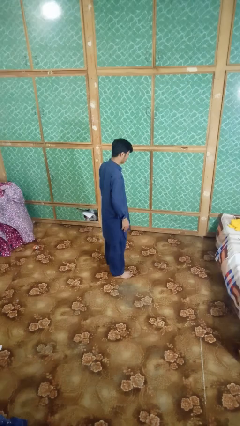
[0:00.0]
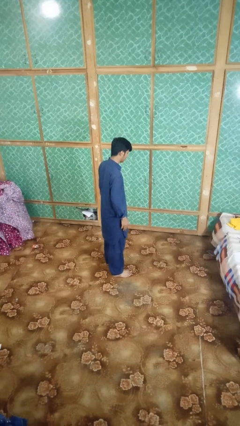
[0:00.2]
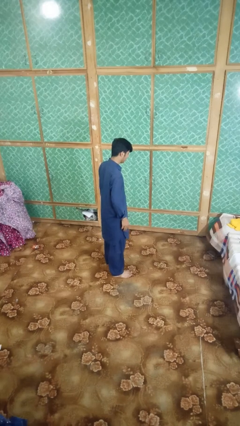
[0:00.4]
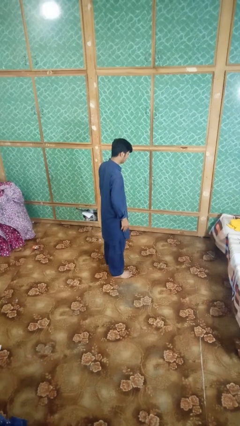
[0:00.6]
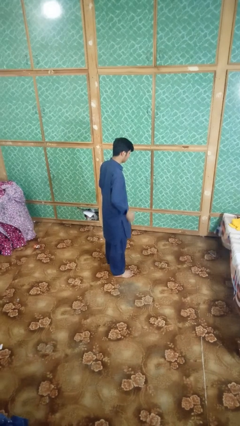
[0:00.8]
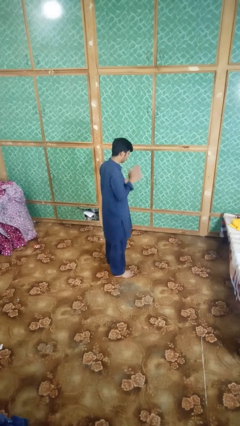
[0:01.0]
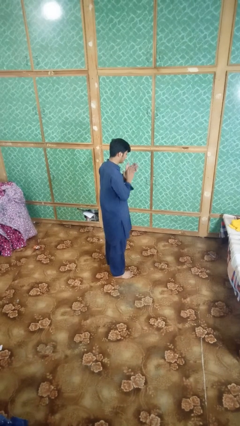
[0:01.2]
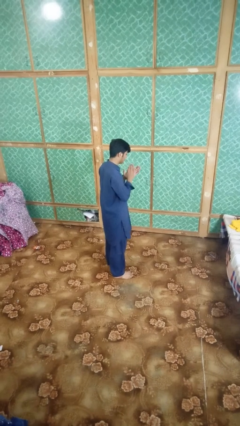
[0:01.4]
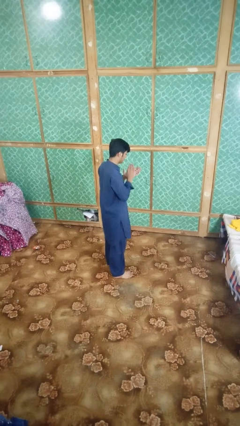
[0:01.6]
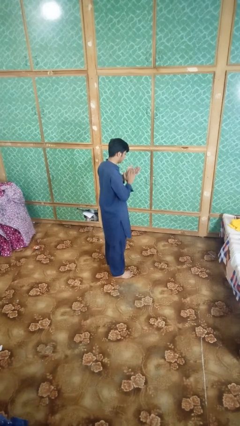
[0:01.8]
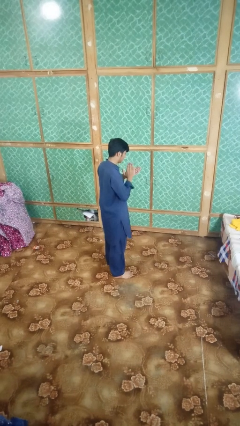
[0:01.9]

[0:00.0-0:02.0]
person claps hands

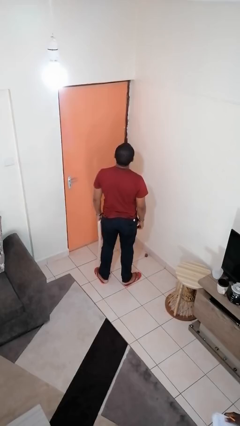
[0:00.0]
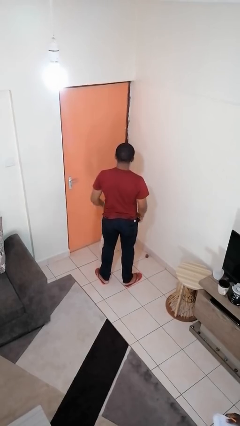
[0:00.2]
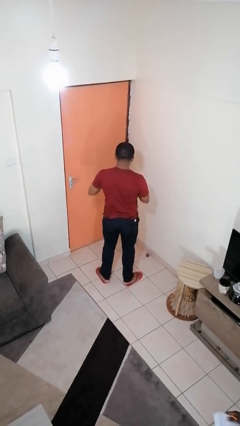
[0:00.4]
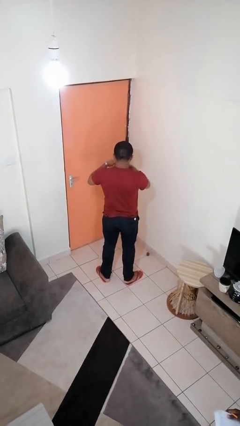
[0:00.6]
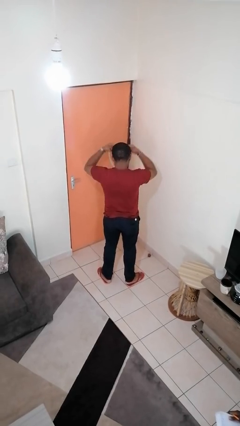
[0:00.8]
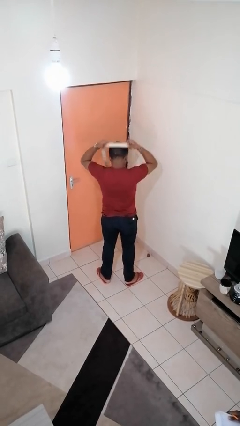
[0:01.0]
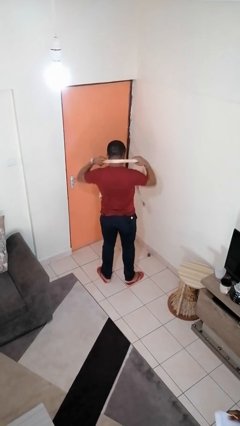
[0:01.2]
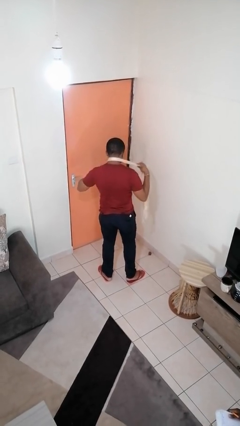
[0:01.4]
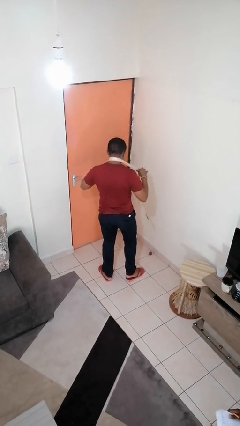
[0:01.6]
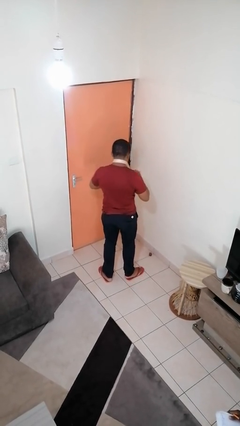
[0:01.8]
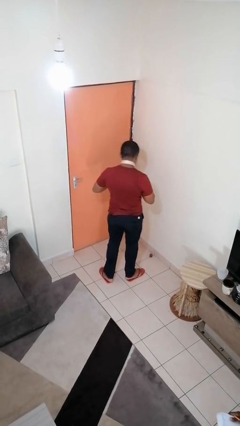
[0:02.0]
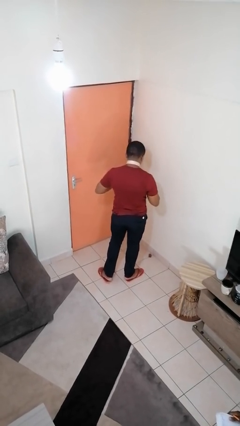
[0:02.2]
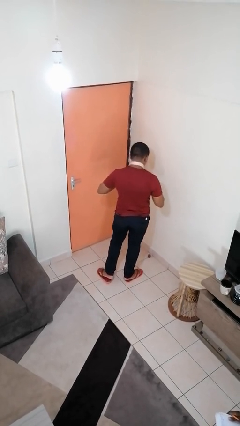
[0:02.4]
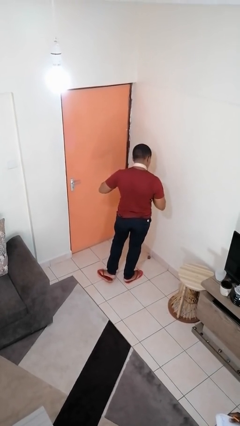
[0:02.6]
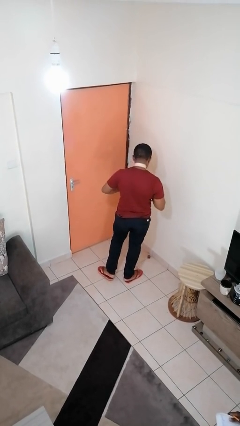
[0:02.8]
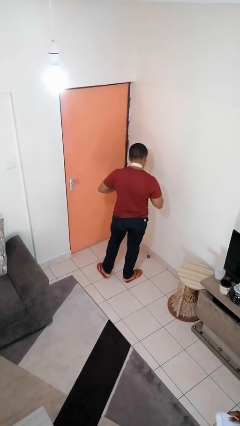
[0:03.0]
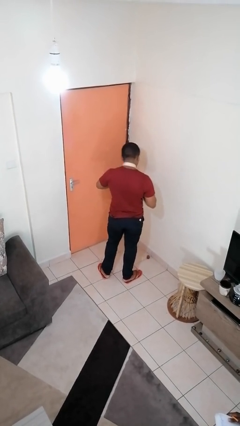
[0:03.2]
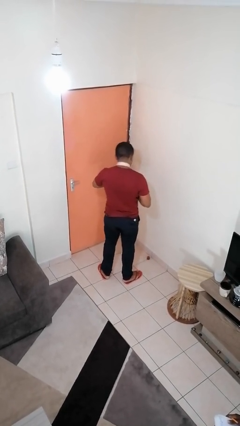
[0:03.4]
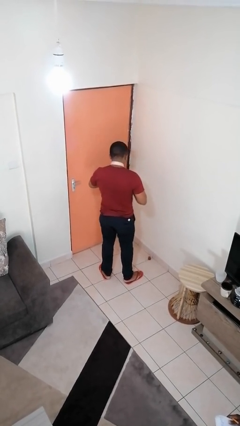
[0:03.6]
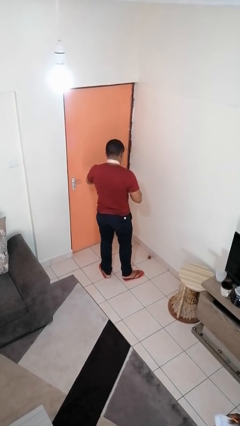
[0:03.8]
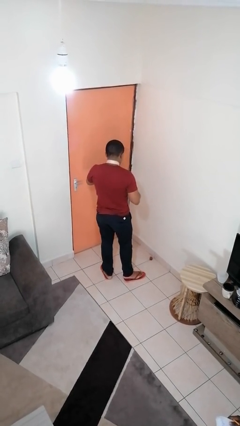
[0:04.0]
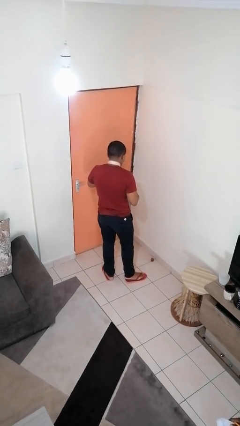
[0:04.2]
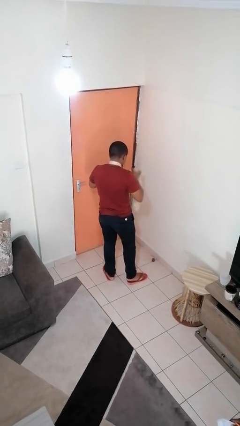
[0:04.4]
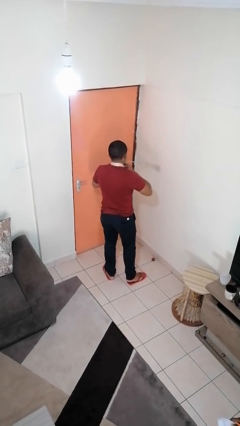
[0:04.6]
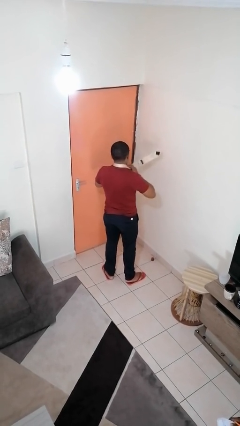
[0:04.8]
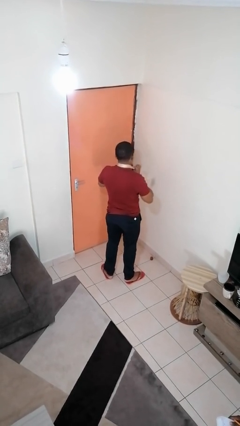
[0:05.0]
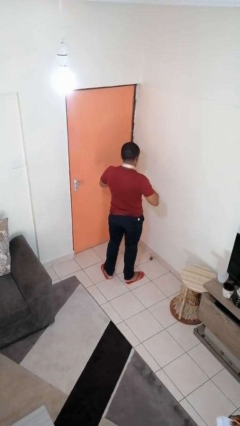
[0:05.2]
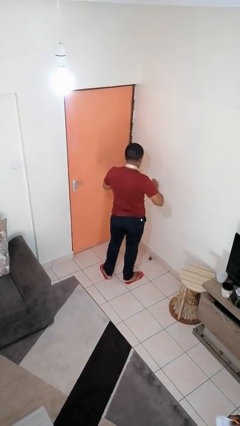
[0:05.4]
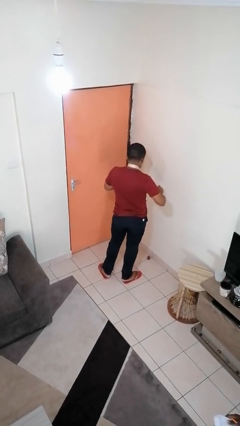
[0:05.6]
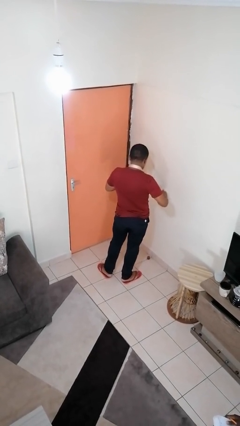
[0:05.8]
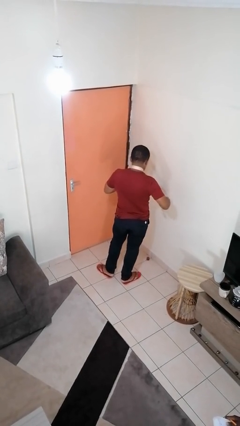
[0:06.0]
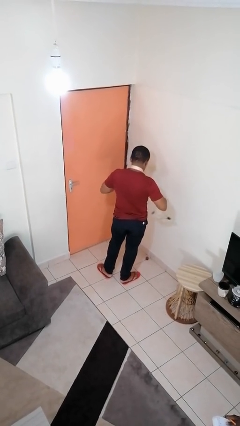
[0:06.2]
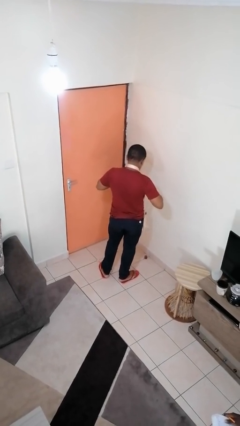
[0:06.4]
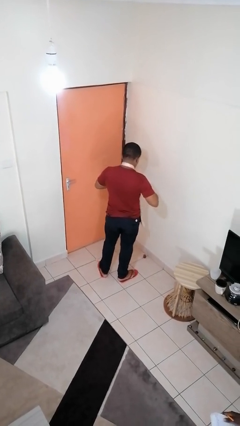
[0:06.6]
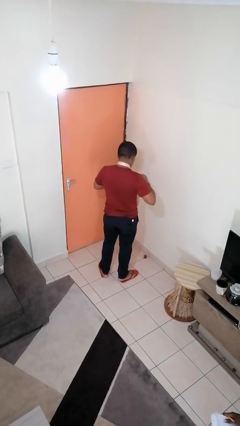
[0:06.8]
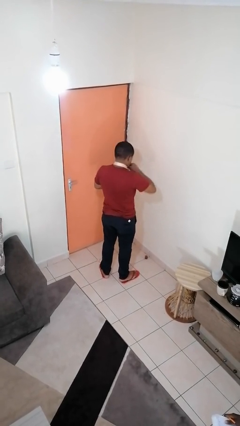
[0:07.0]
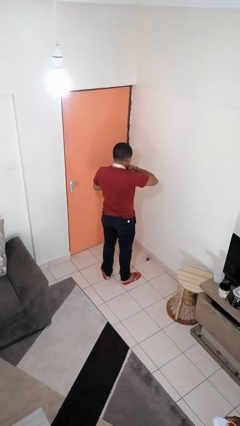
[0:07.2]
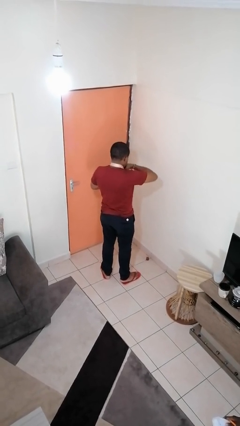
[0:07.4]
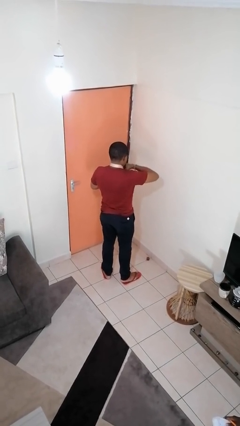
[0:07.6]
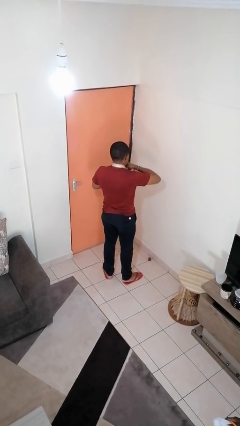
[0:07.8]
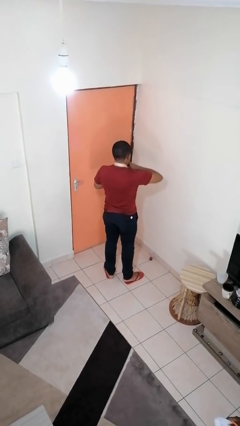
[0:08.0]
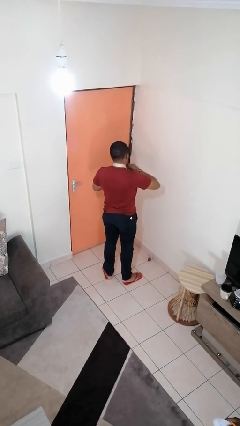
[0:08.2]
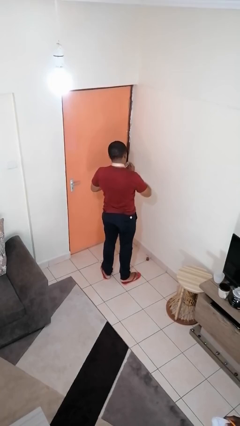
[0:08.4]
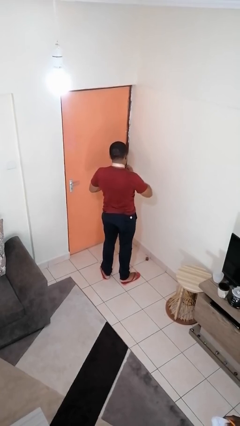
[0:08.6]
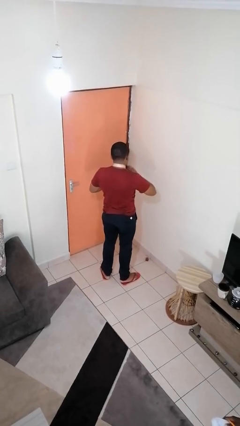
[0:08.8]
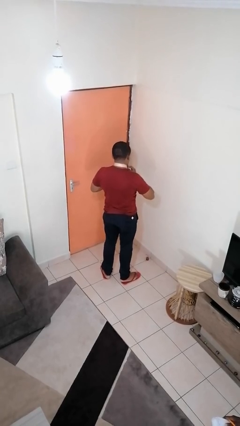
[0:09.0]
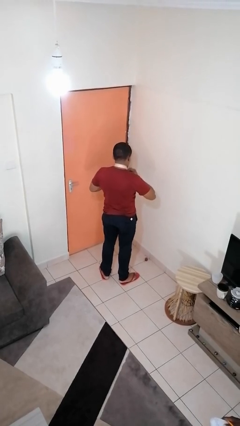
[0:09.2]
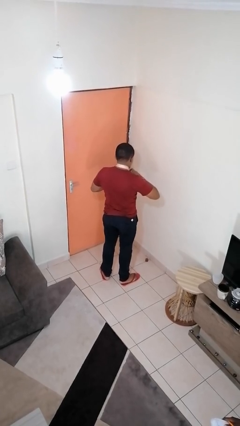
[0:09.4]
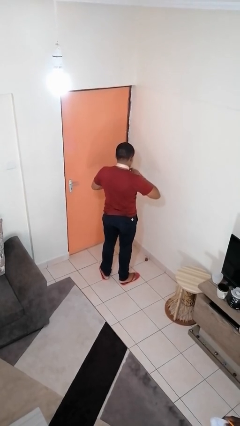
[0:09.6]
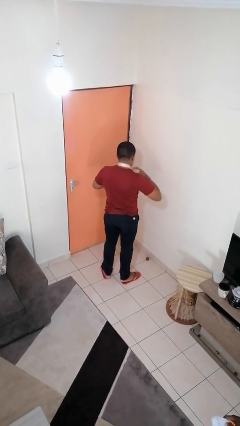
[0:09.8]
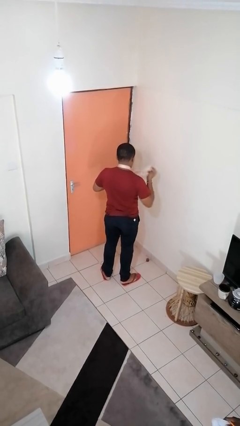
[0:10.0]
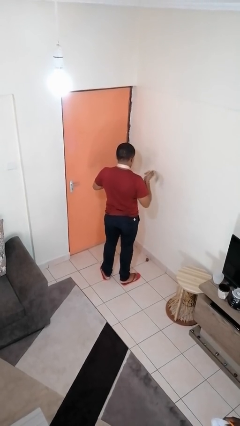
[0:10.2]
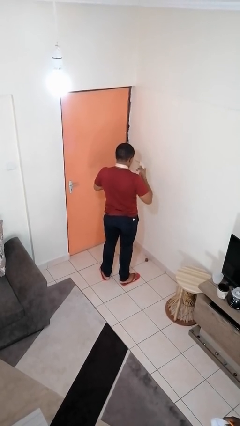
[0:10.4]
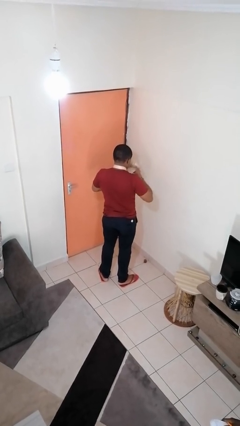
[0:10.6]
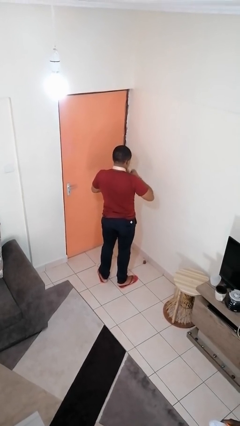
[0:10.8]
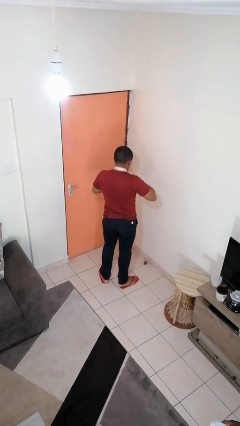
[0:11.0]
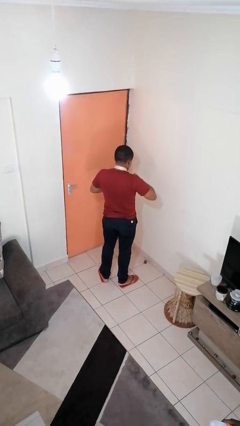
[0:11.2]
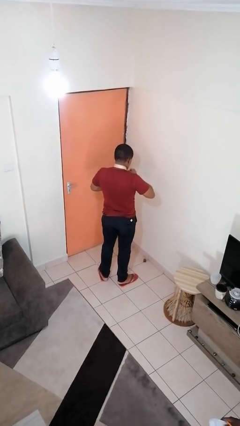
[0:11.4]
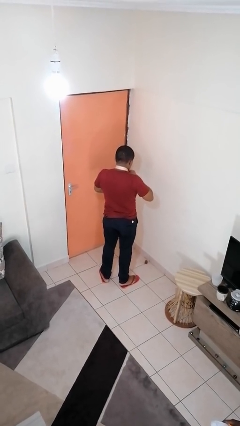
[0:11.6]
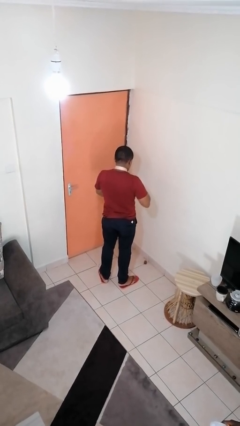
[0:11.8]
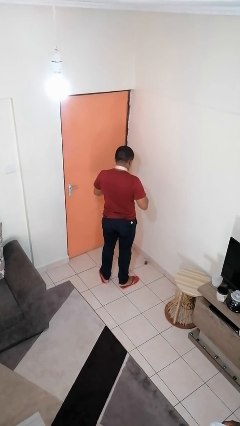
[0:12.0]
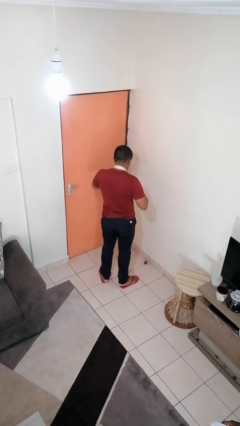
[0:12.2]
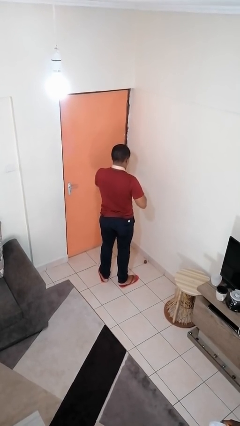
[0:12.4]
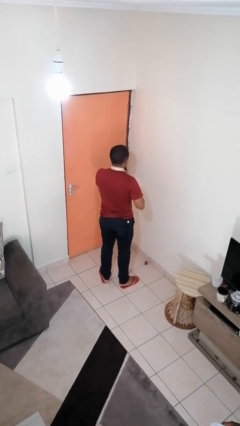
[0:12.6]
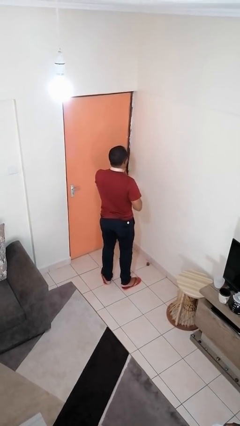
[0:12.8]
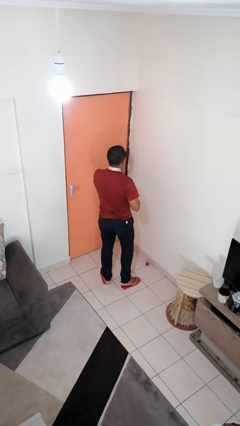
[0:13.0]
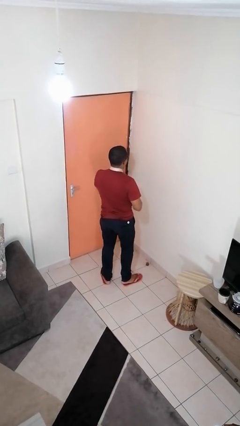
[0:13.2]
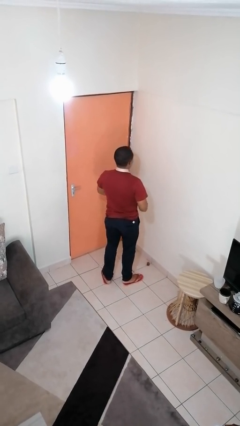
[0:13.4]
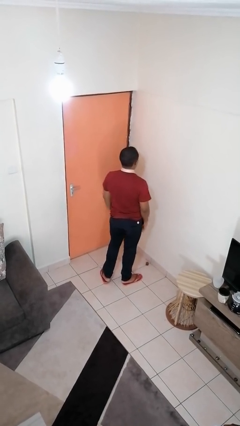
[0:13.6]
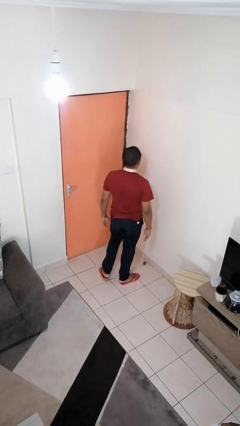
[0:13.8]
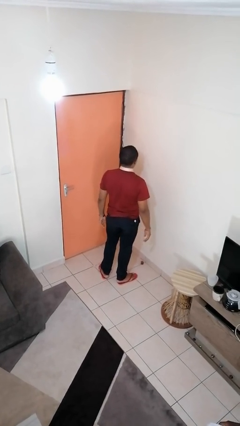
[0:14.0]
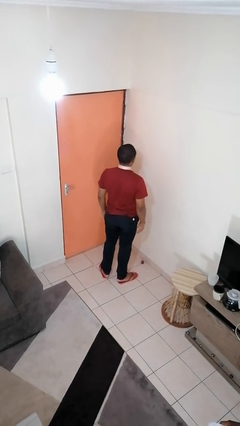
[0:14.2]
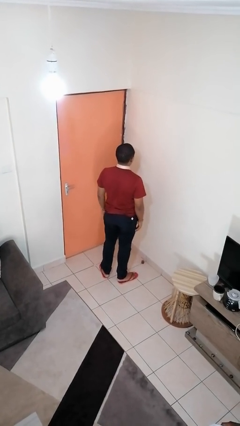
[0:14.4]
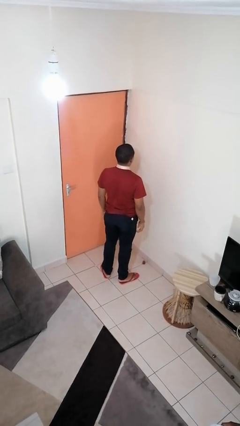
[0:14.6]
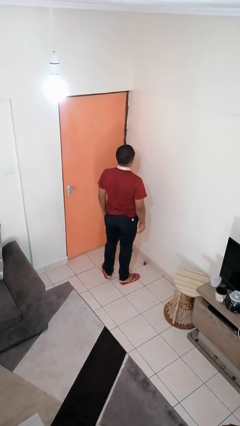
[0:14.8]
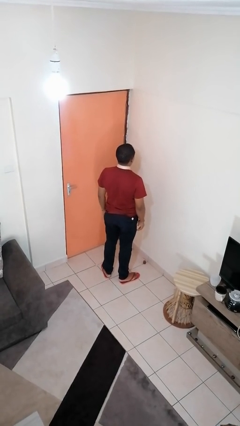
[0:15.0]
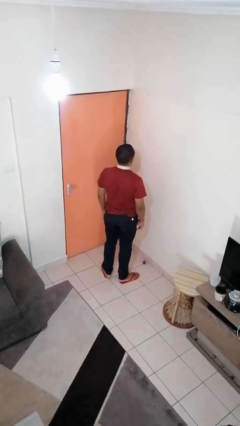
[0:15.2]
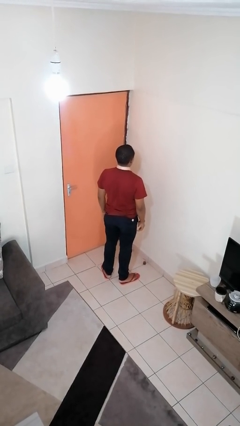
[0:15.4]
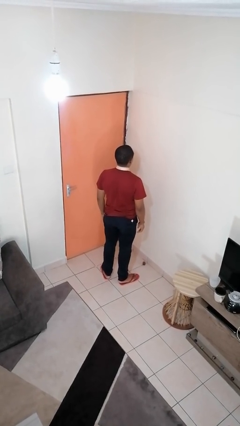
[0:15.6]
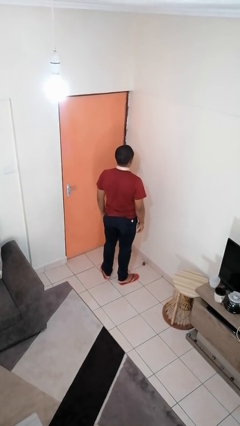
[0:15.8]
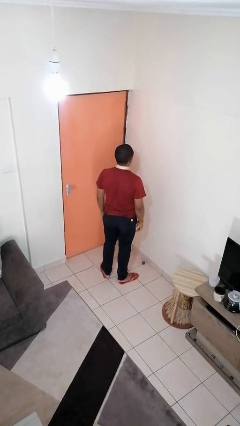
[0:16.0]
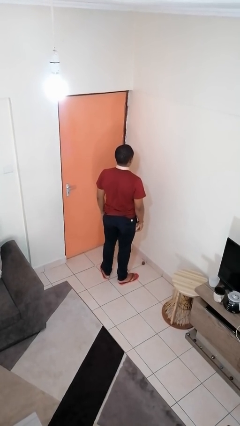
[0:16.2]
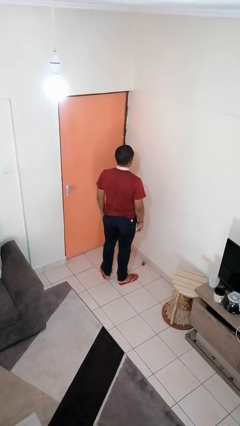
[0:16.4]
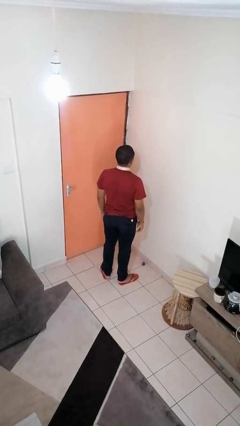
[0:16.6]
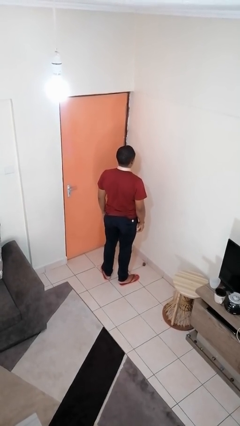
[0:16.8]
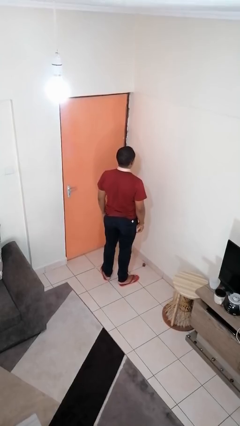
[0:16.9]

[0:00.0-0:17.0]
person puts on necktie
